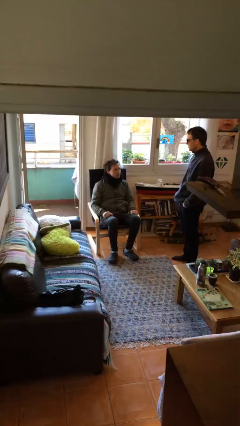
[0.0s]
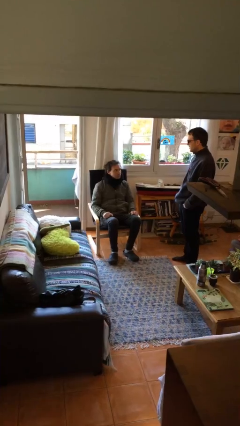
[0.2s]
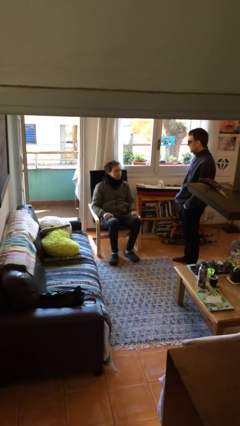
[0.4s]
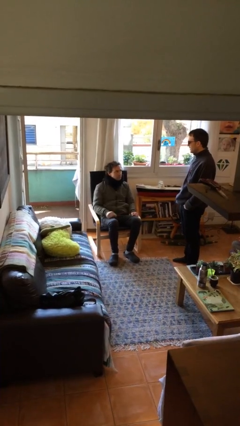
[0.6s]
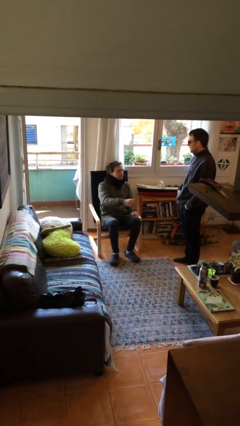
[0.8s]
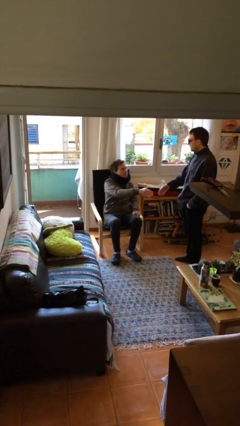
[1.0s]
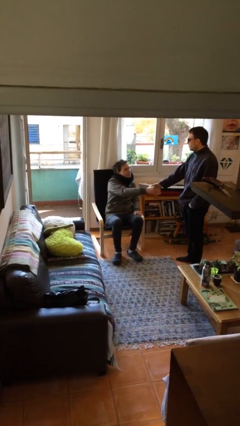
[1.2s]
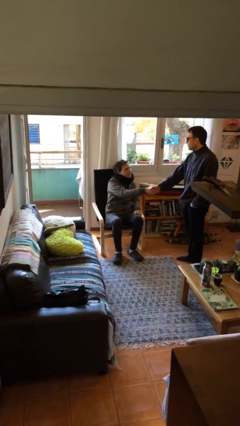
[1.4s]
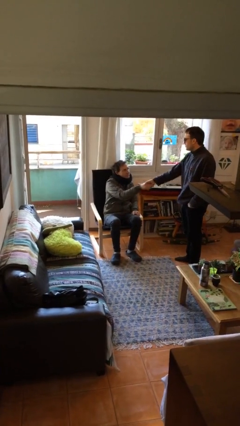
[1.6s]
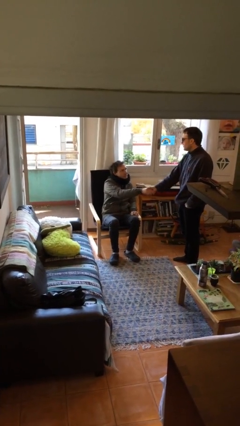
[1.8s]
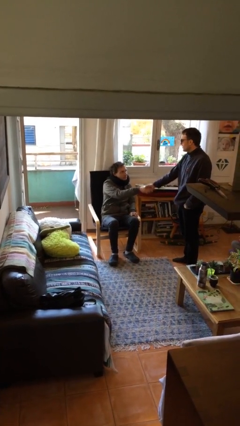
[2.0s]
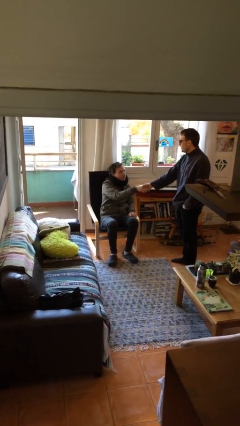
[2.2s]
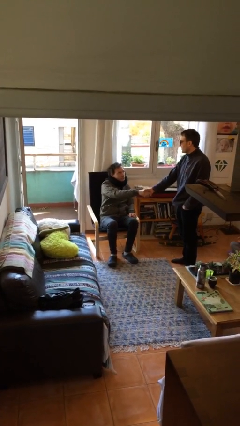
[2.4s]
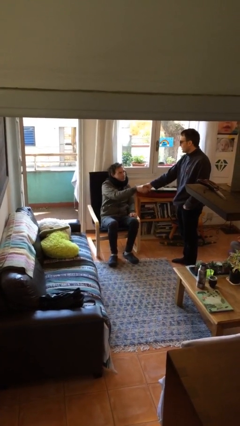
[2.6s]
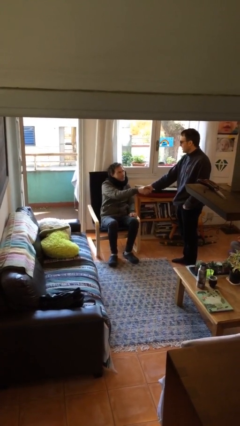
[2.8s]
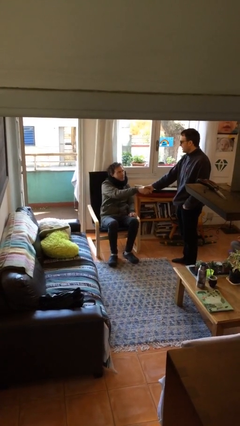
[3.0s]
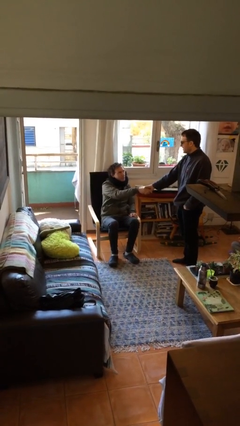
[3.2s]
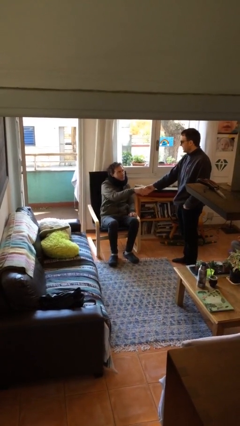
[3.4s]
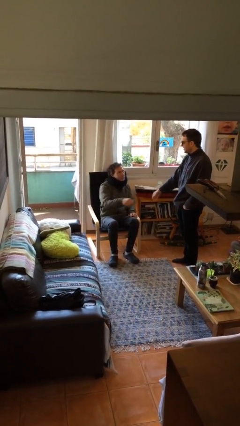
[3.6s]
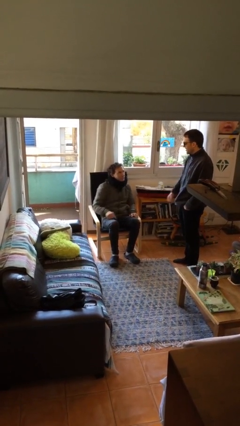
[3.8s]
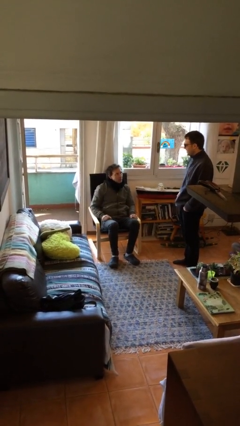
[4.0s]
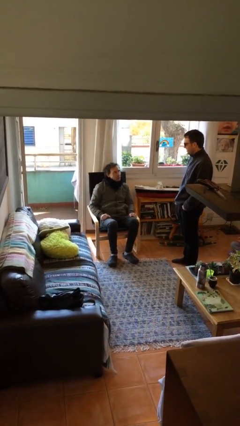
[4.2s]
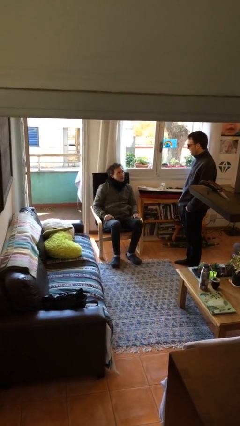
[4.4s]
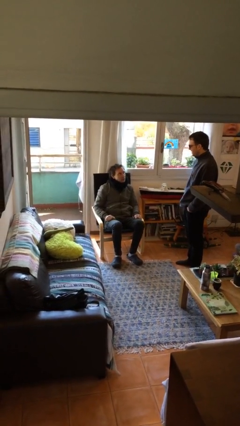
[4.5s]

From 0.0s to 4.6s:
person shakes hand

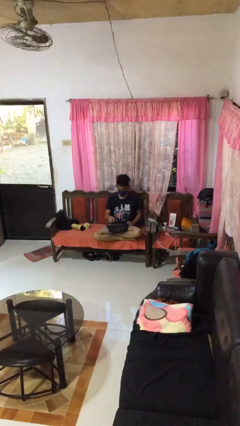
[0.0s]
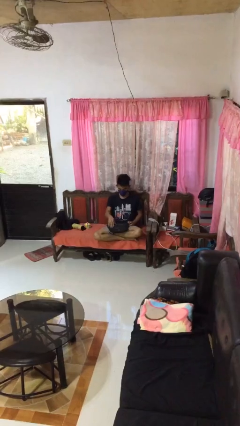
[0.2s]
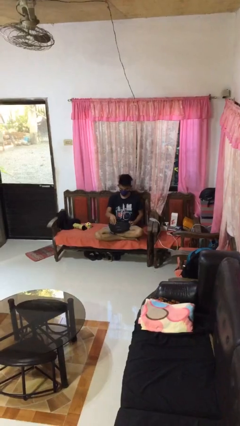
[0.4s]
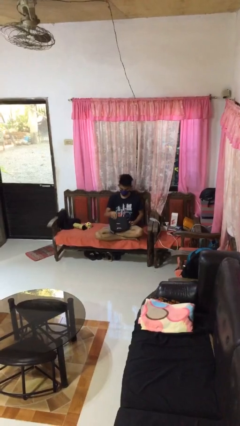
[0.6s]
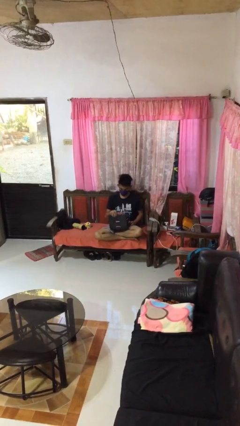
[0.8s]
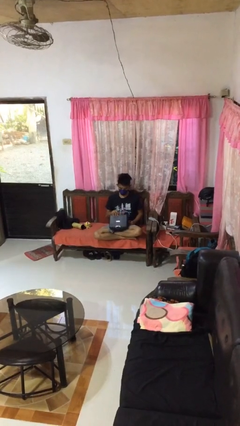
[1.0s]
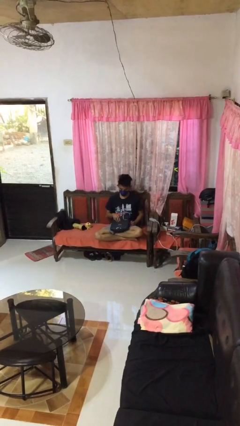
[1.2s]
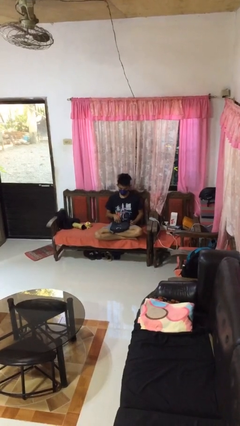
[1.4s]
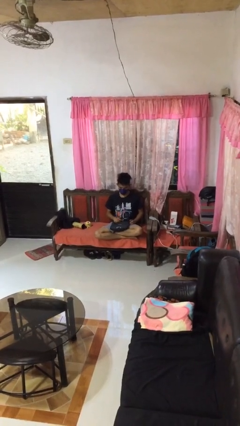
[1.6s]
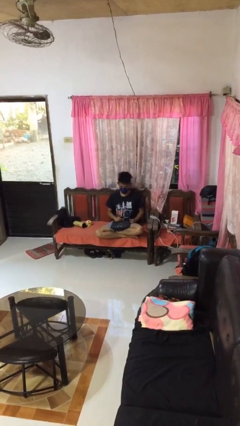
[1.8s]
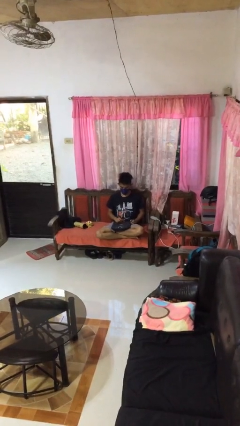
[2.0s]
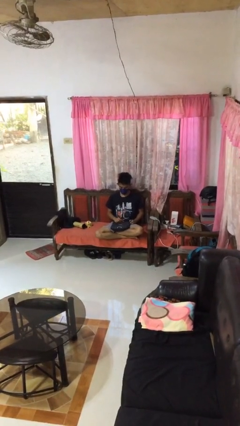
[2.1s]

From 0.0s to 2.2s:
person closes laptop

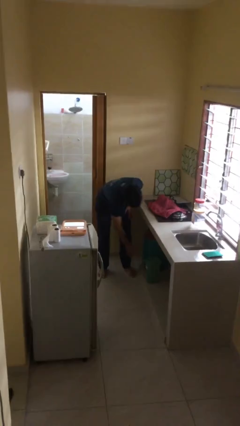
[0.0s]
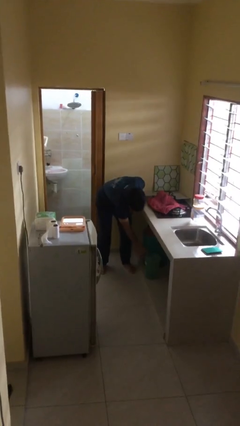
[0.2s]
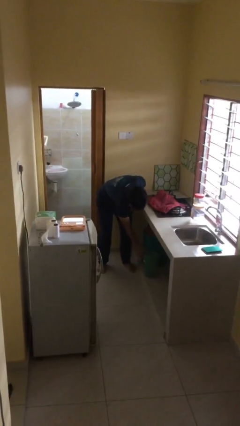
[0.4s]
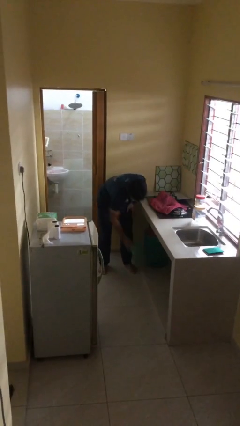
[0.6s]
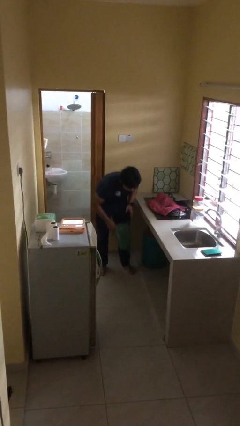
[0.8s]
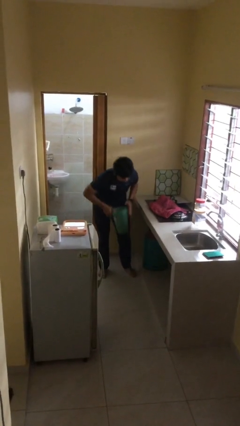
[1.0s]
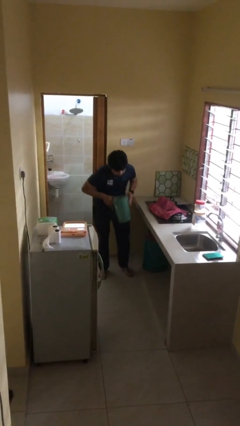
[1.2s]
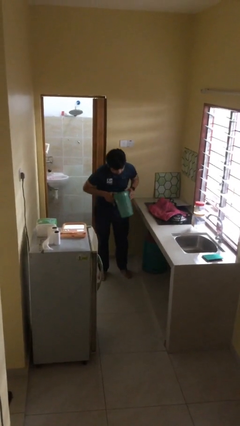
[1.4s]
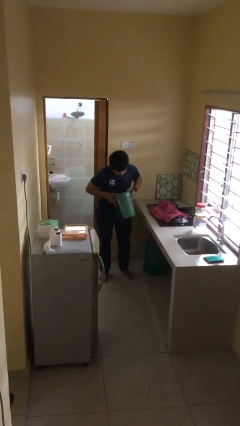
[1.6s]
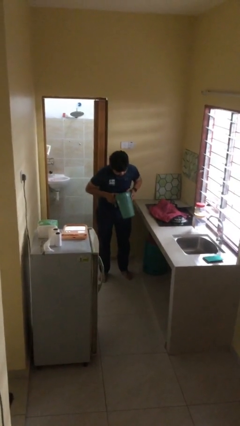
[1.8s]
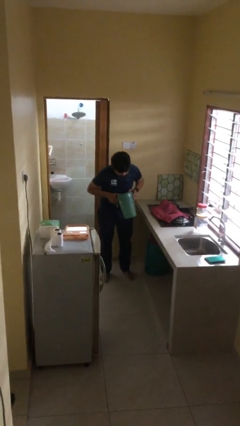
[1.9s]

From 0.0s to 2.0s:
person picks up object from cabinet

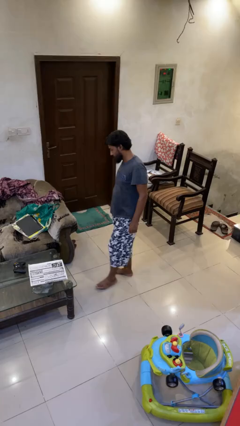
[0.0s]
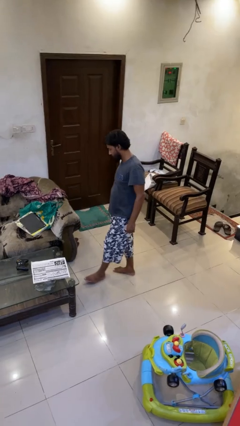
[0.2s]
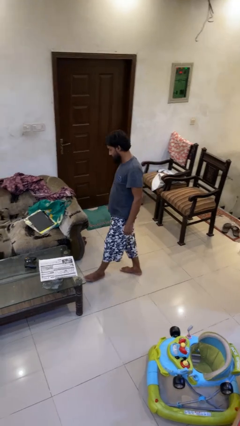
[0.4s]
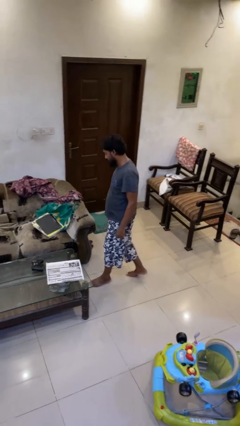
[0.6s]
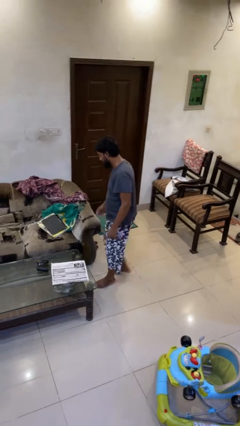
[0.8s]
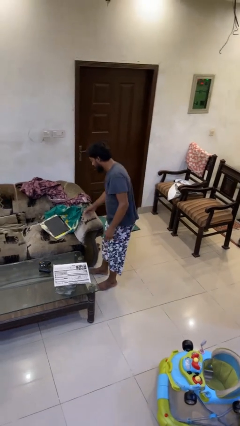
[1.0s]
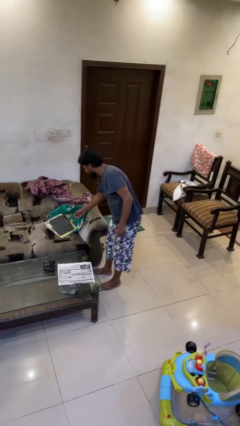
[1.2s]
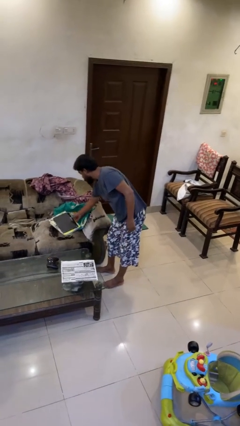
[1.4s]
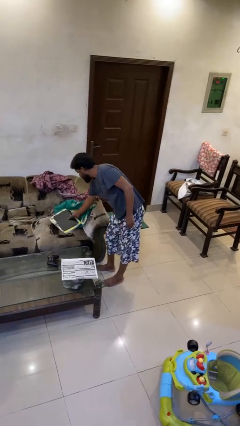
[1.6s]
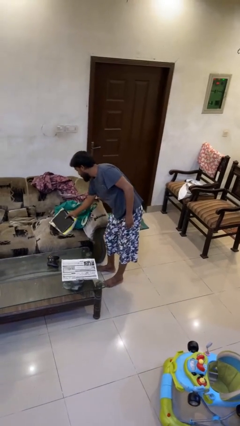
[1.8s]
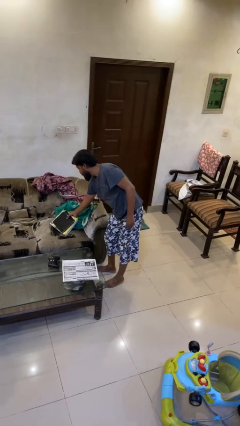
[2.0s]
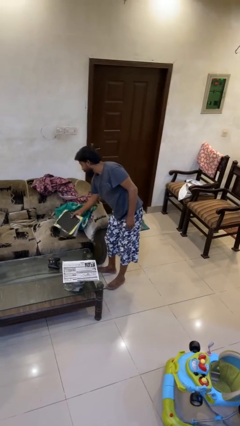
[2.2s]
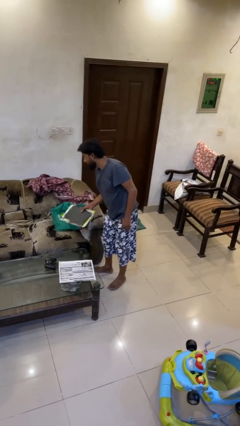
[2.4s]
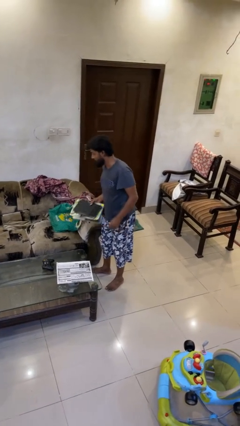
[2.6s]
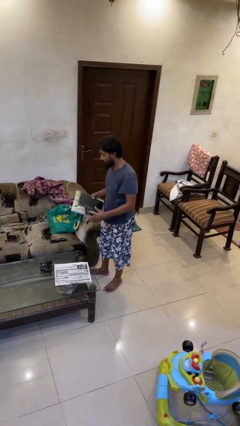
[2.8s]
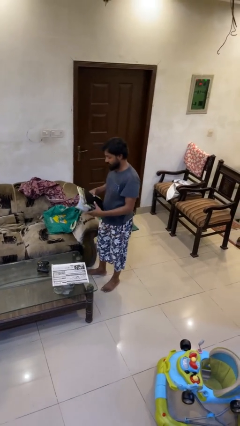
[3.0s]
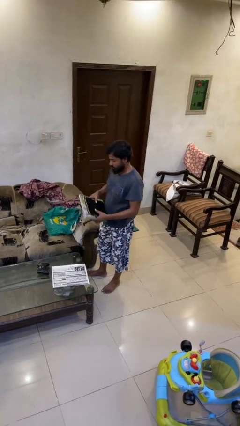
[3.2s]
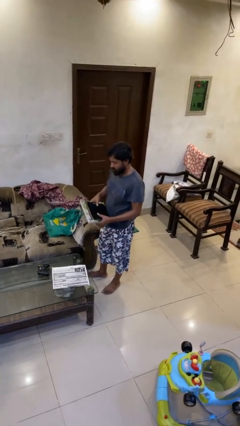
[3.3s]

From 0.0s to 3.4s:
person picks up object from couch

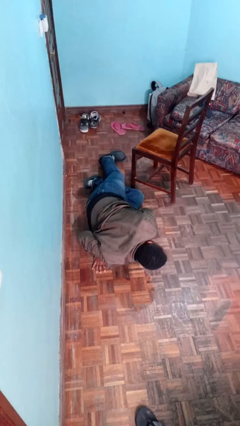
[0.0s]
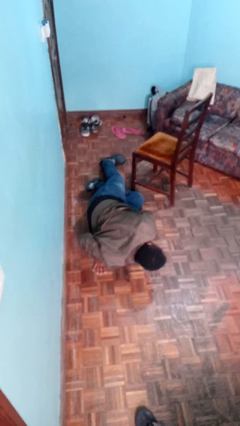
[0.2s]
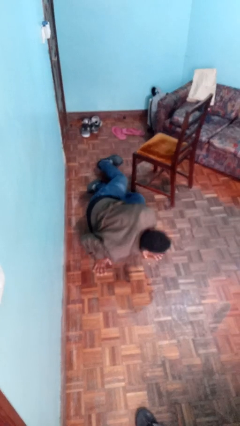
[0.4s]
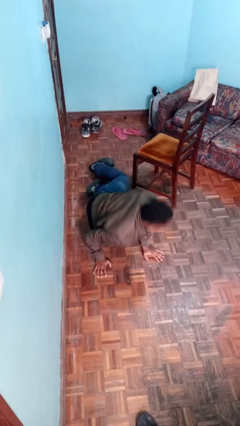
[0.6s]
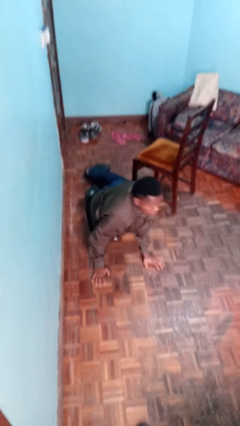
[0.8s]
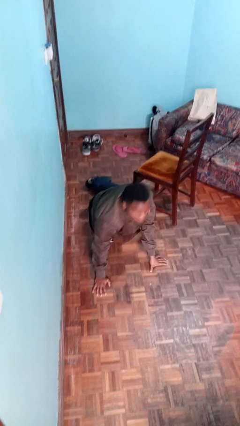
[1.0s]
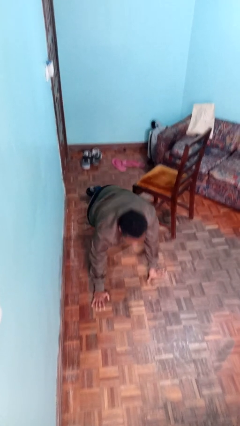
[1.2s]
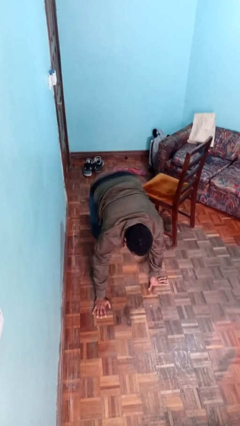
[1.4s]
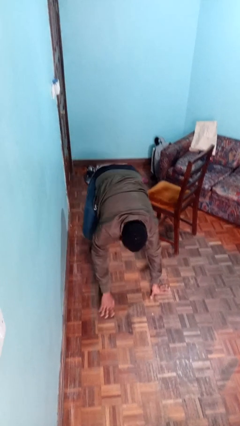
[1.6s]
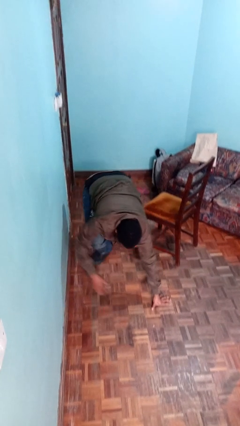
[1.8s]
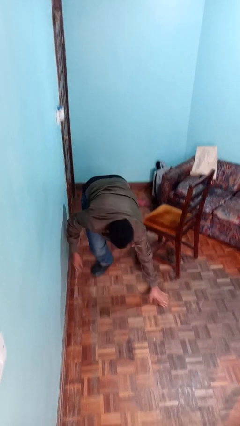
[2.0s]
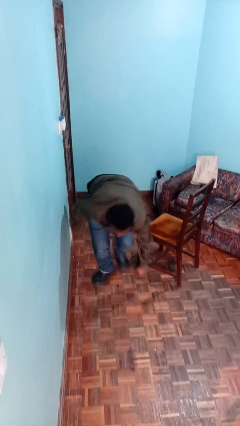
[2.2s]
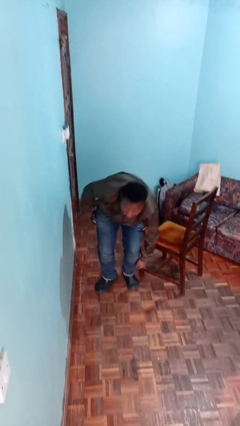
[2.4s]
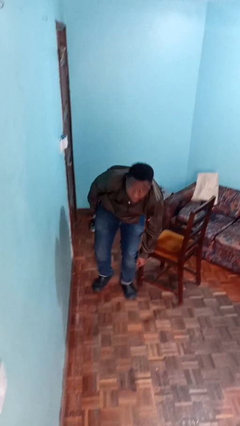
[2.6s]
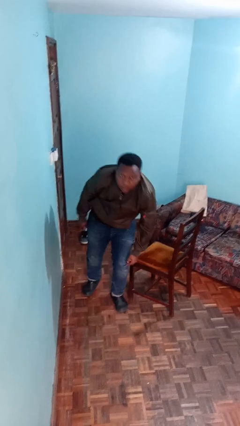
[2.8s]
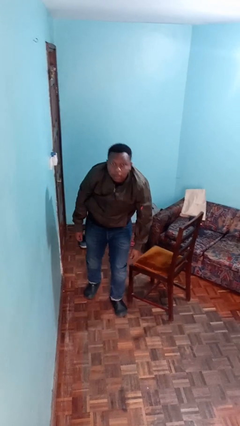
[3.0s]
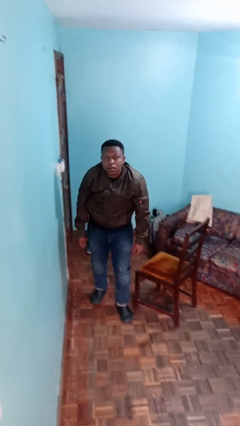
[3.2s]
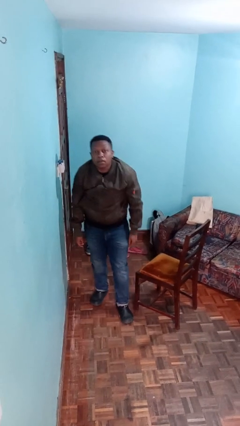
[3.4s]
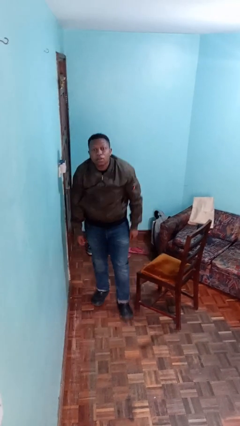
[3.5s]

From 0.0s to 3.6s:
person stands up from floor

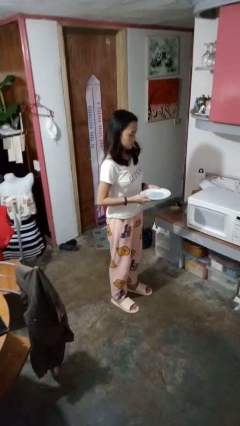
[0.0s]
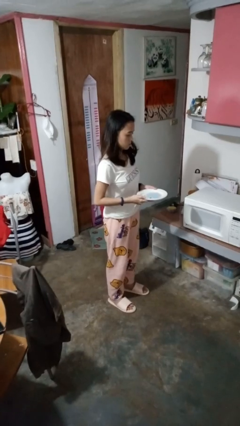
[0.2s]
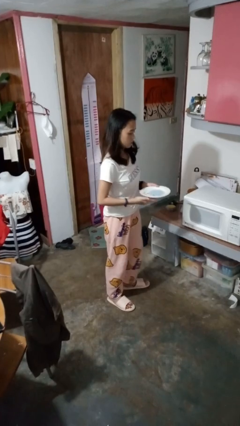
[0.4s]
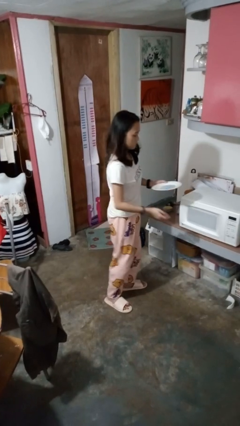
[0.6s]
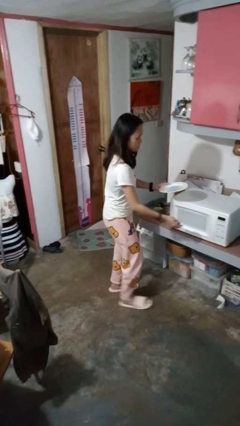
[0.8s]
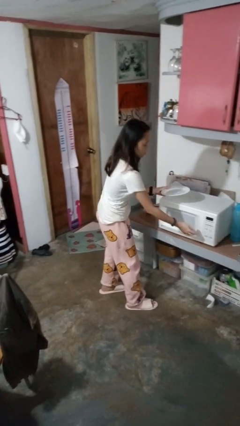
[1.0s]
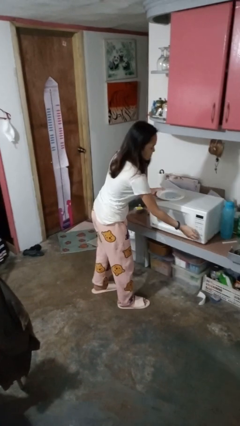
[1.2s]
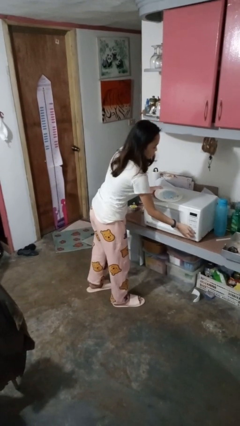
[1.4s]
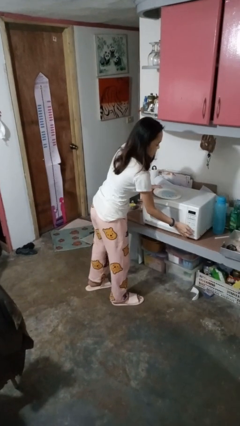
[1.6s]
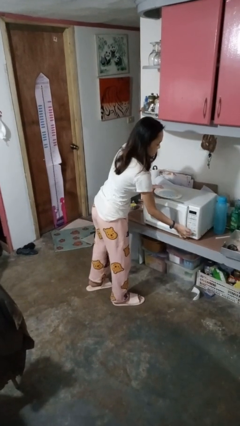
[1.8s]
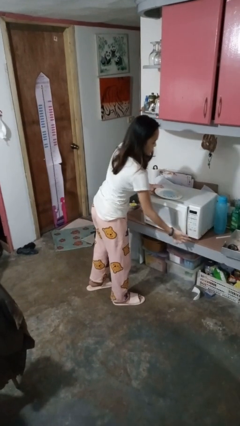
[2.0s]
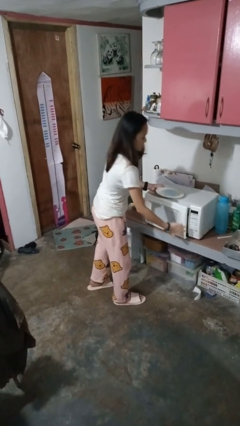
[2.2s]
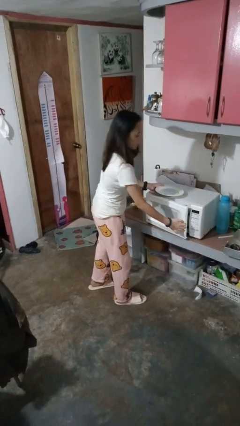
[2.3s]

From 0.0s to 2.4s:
person opens microwave
